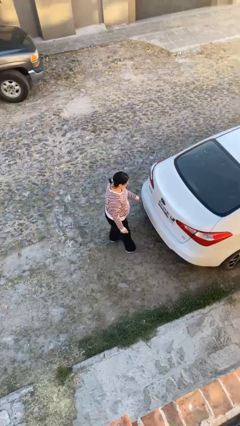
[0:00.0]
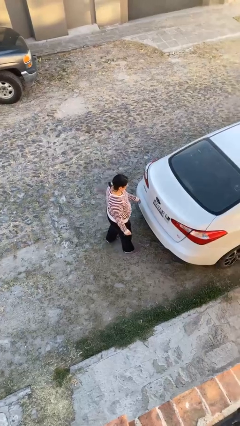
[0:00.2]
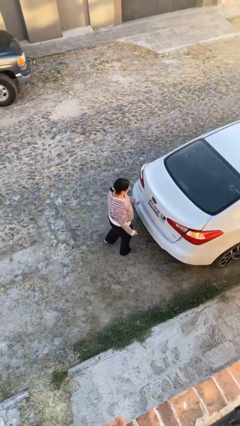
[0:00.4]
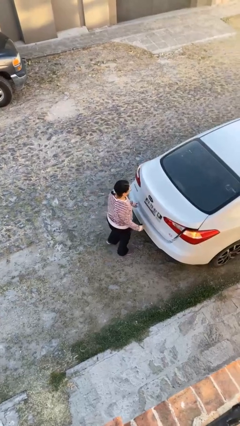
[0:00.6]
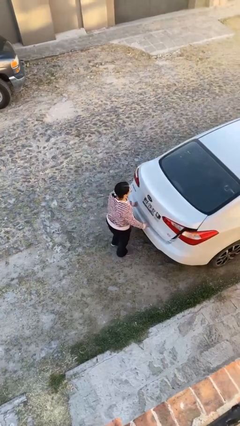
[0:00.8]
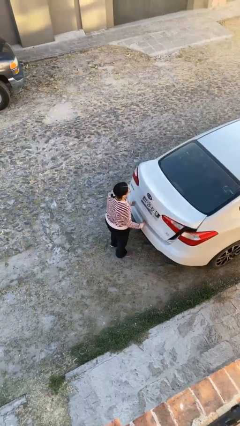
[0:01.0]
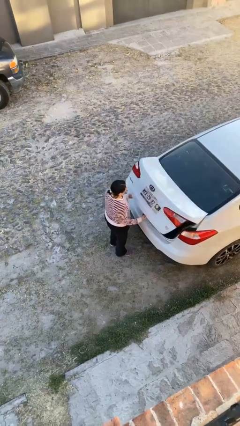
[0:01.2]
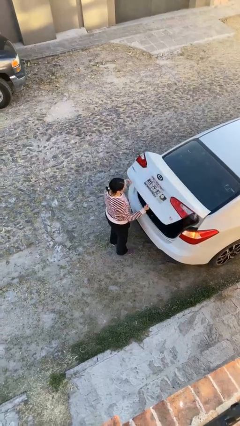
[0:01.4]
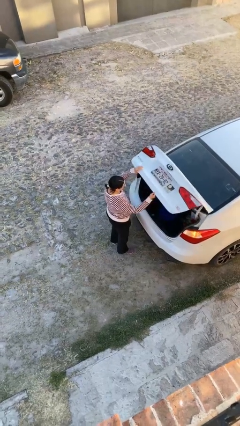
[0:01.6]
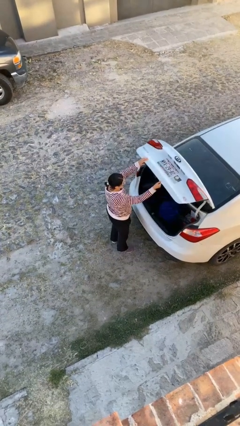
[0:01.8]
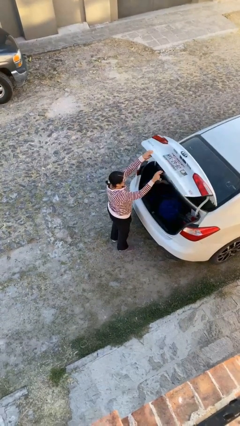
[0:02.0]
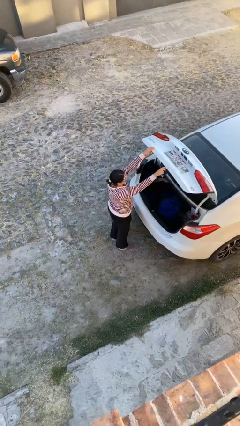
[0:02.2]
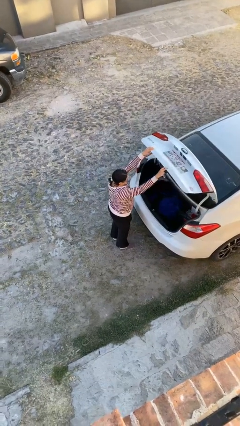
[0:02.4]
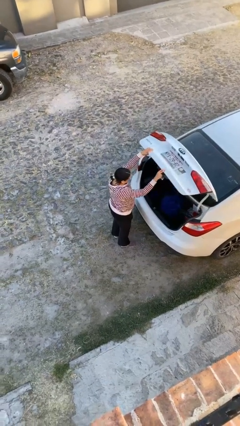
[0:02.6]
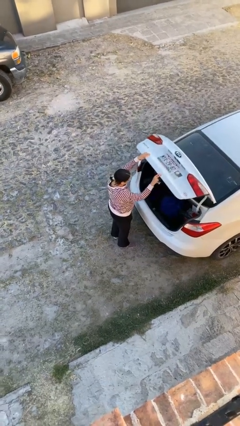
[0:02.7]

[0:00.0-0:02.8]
person opens car trunk

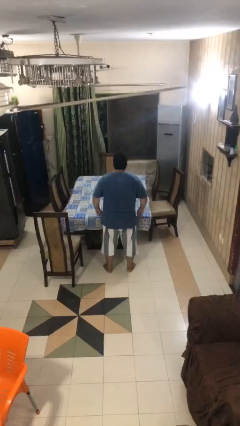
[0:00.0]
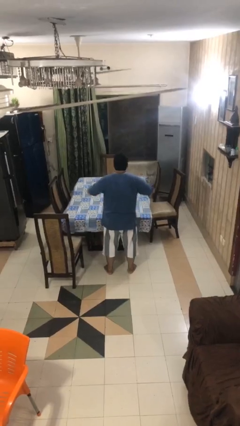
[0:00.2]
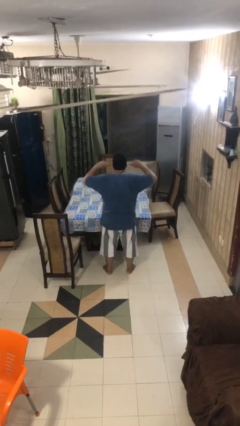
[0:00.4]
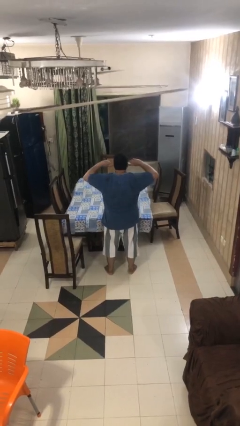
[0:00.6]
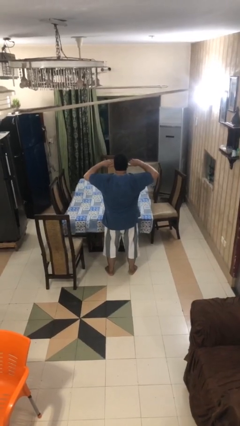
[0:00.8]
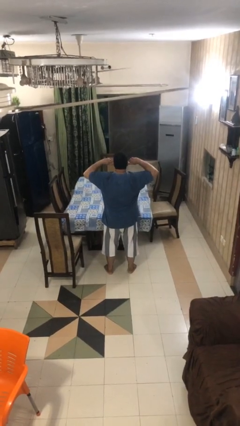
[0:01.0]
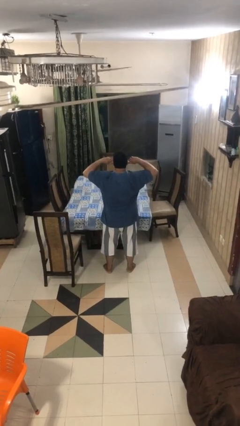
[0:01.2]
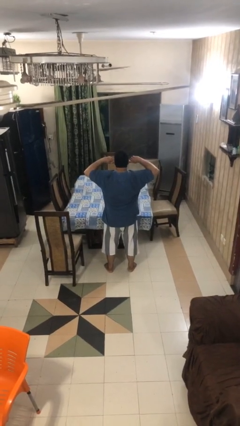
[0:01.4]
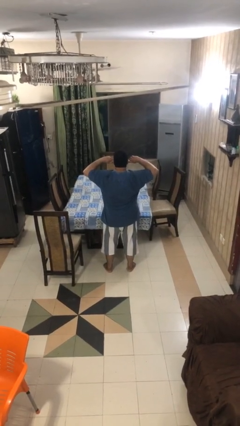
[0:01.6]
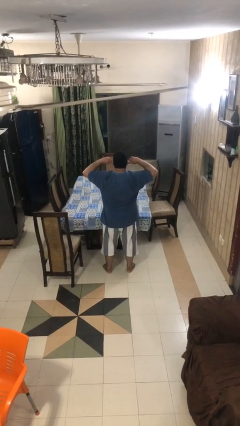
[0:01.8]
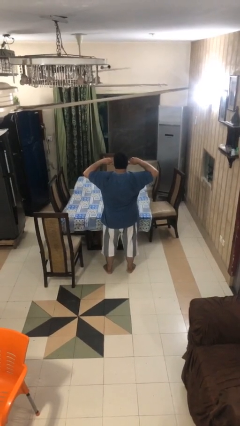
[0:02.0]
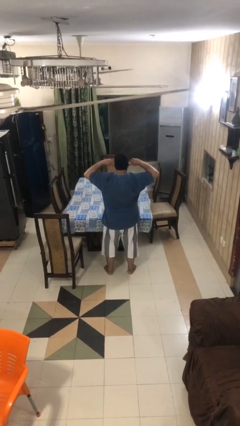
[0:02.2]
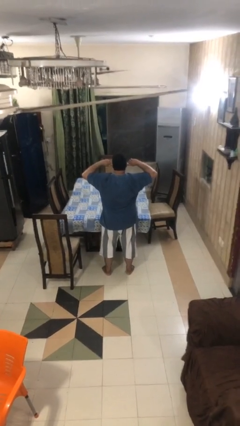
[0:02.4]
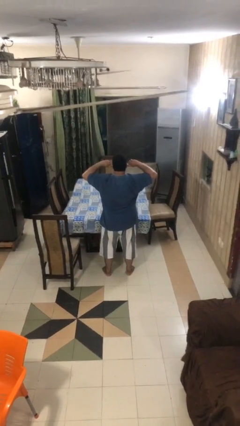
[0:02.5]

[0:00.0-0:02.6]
person puts fingers in ear

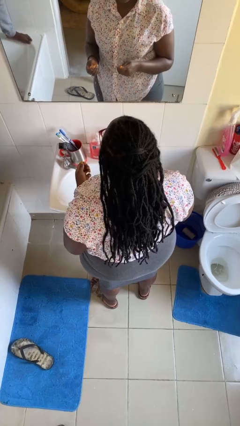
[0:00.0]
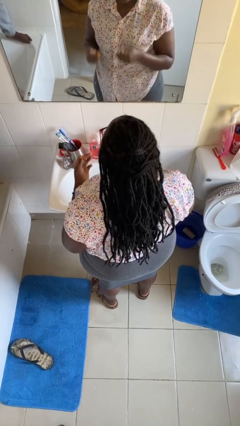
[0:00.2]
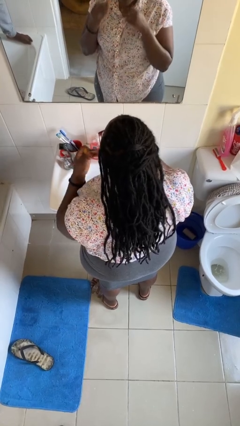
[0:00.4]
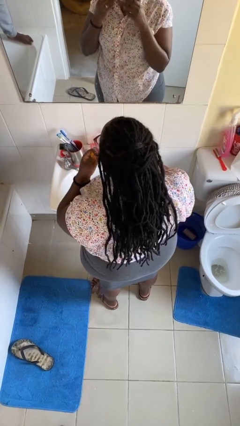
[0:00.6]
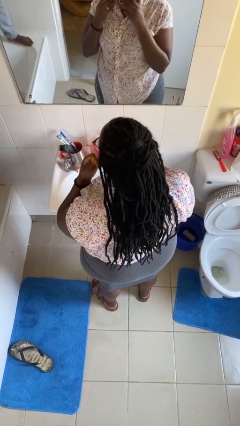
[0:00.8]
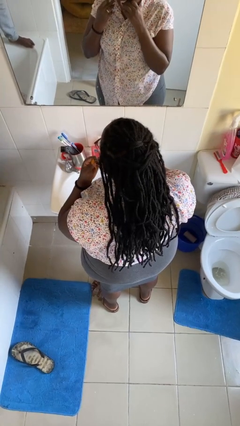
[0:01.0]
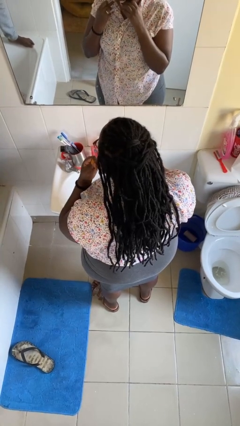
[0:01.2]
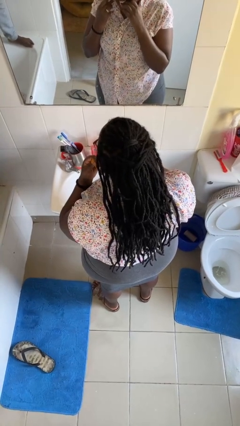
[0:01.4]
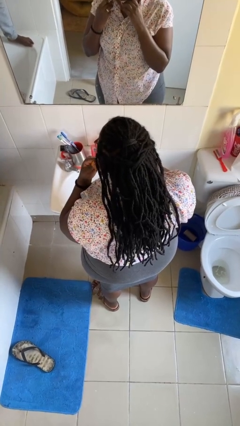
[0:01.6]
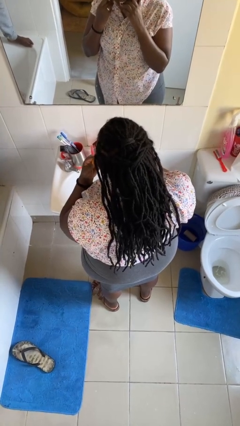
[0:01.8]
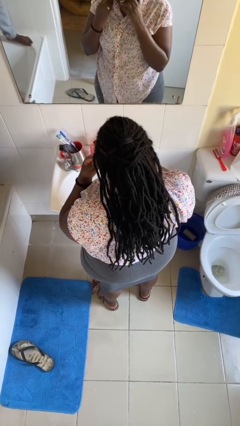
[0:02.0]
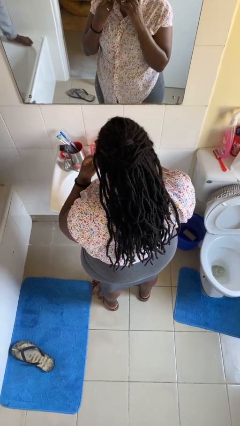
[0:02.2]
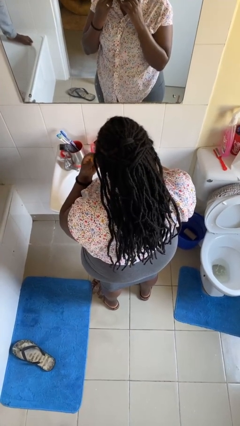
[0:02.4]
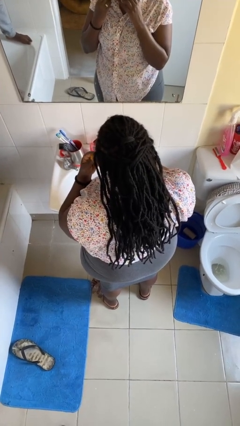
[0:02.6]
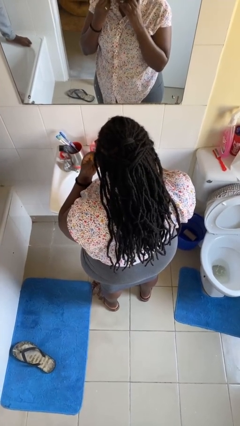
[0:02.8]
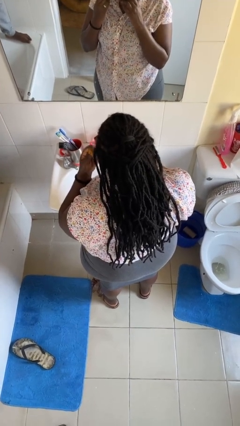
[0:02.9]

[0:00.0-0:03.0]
person flosses

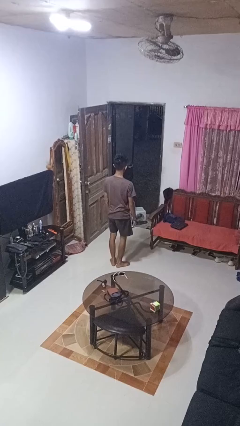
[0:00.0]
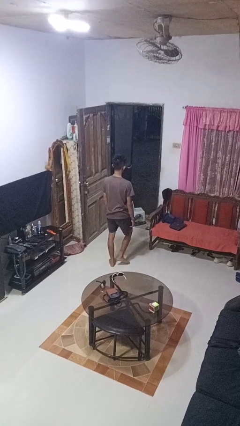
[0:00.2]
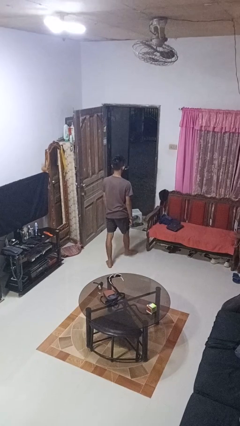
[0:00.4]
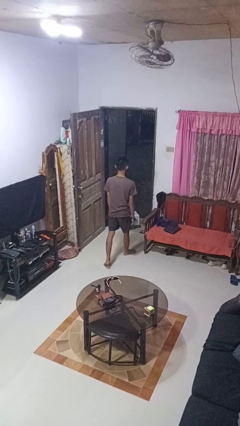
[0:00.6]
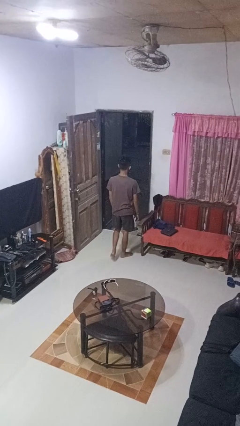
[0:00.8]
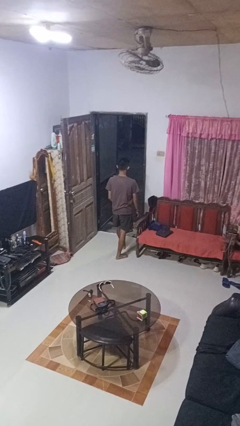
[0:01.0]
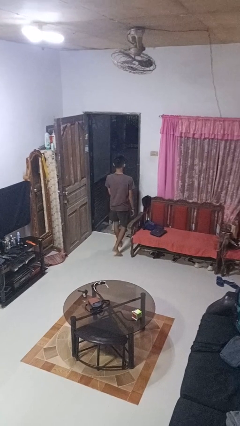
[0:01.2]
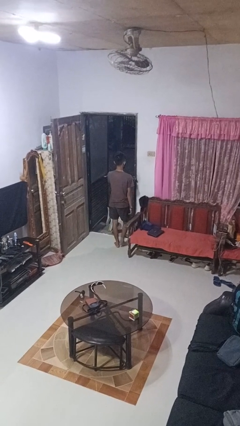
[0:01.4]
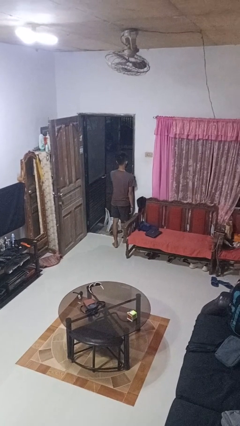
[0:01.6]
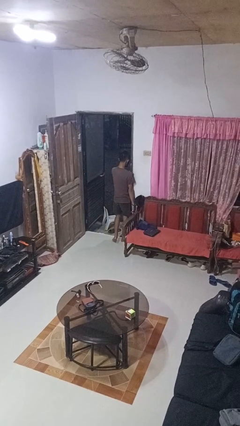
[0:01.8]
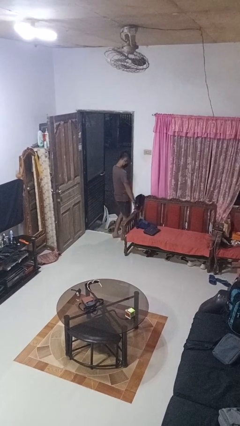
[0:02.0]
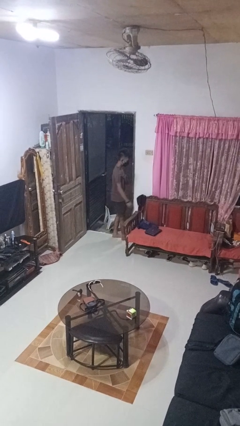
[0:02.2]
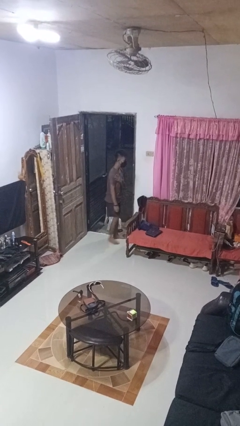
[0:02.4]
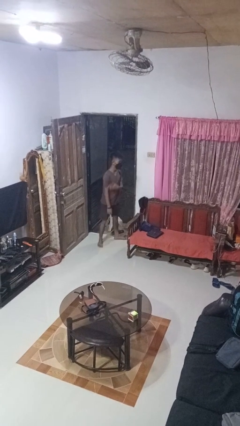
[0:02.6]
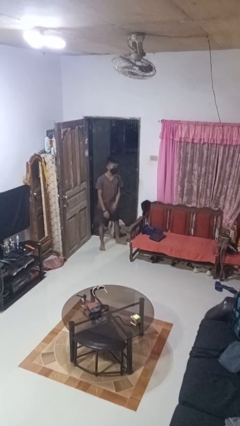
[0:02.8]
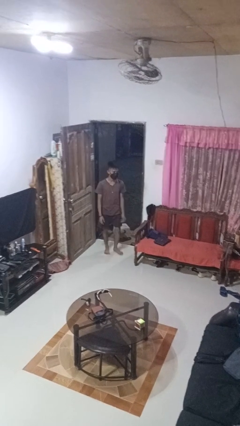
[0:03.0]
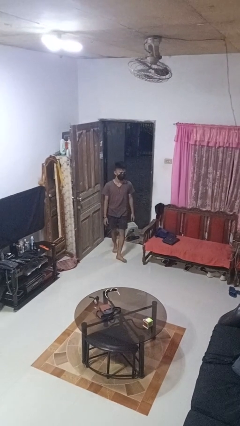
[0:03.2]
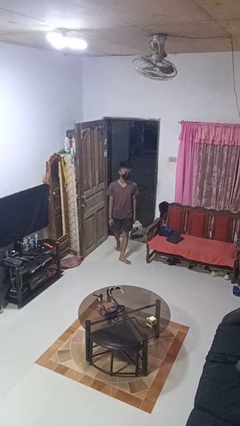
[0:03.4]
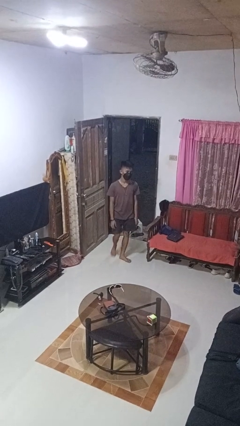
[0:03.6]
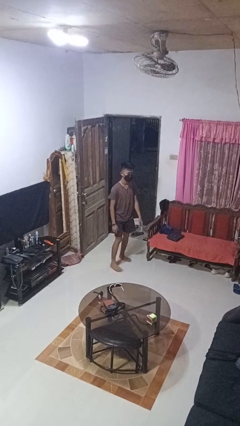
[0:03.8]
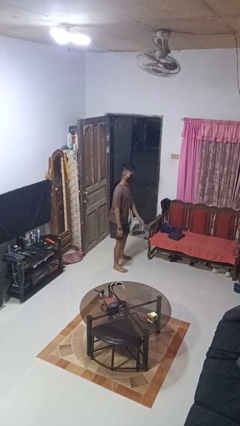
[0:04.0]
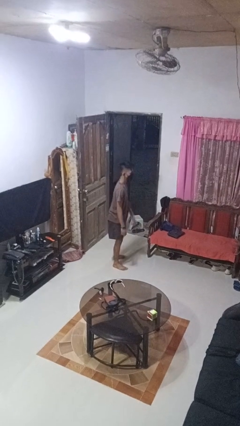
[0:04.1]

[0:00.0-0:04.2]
person bumps into wall

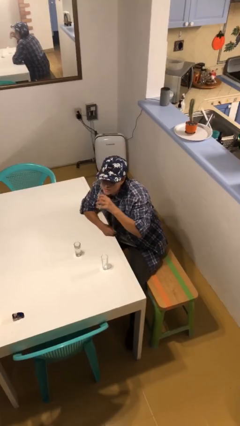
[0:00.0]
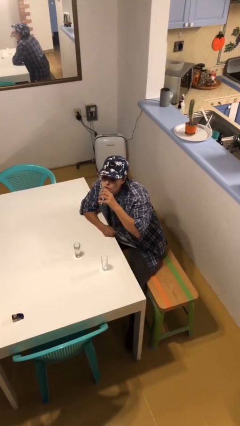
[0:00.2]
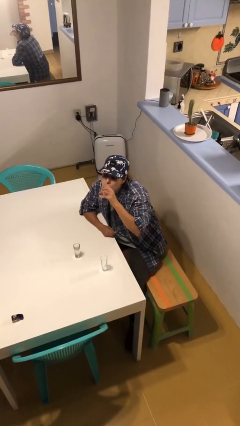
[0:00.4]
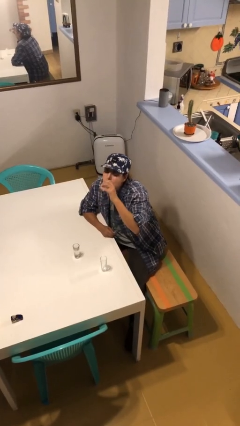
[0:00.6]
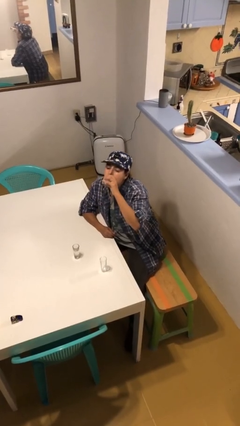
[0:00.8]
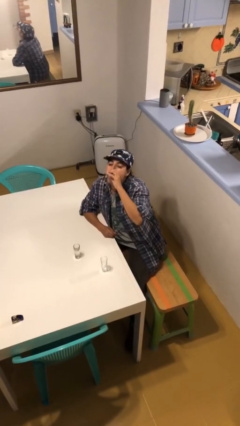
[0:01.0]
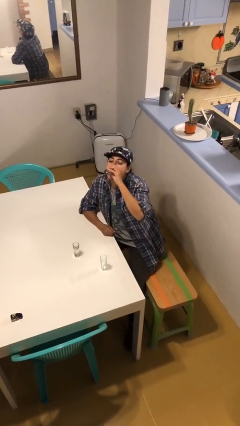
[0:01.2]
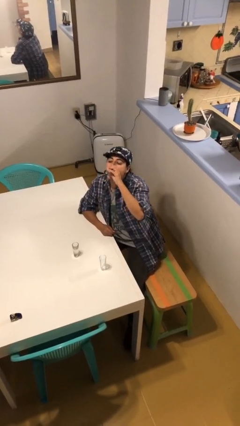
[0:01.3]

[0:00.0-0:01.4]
person drinks from shotglass

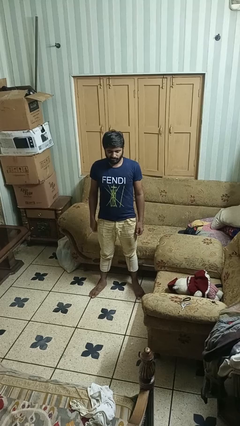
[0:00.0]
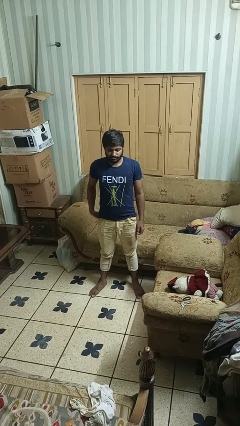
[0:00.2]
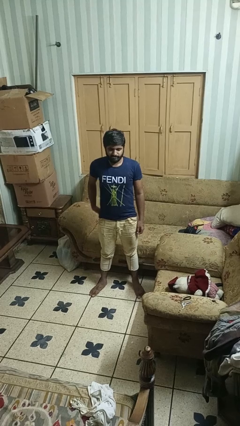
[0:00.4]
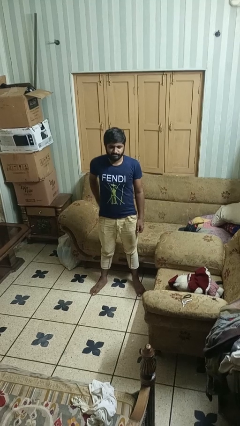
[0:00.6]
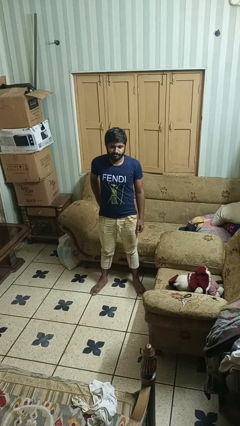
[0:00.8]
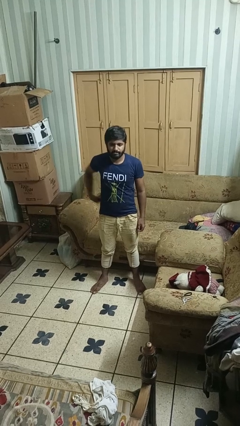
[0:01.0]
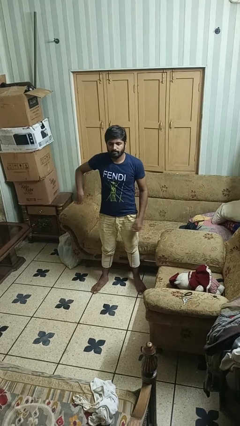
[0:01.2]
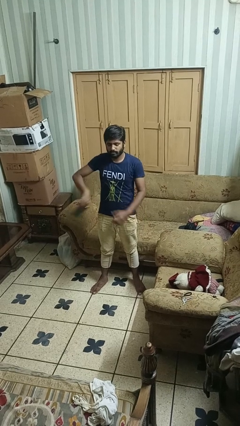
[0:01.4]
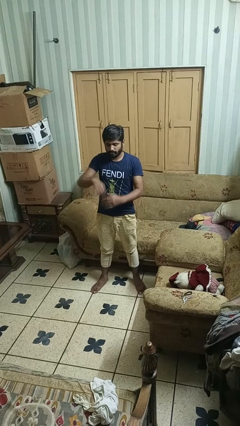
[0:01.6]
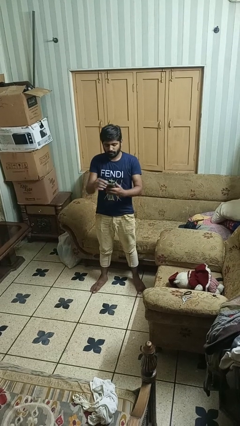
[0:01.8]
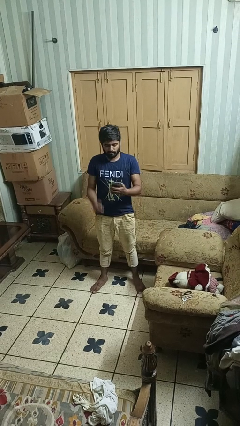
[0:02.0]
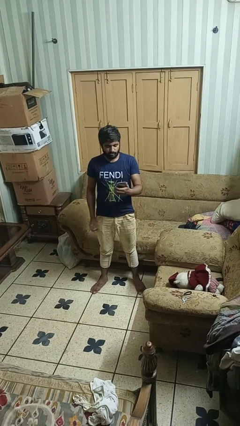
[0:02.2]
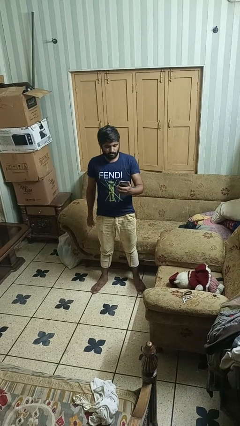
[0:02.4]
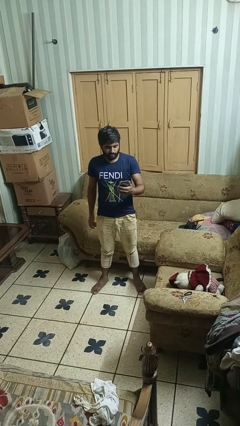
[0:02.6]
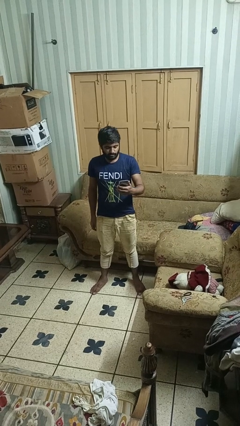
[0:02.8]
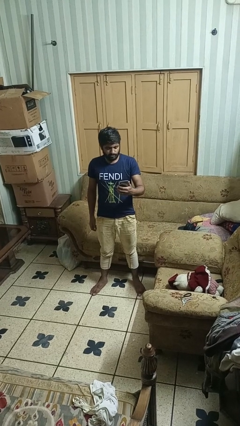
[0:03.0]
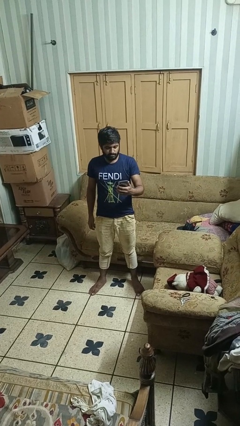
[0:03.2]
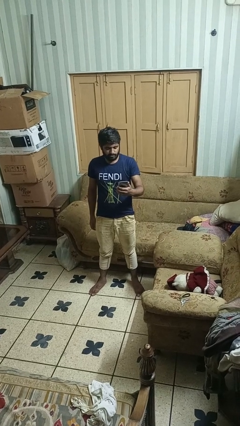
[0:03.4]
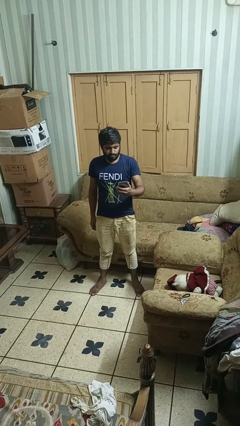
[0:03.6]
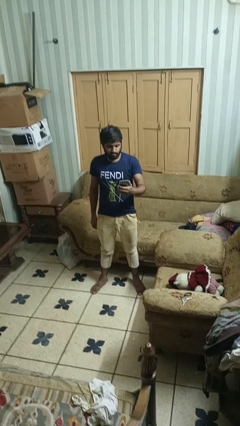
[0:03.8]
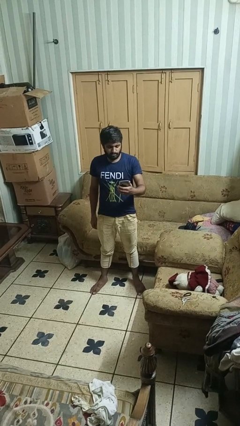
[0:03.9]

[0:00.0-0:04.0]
person takes phone from pocket
